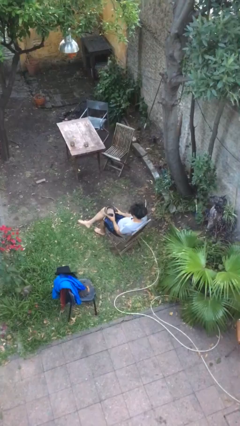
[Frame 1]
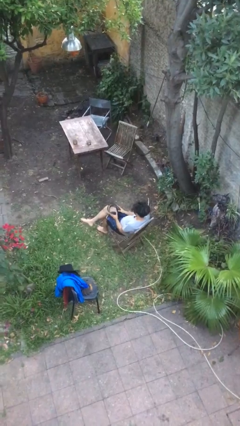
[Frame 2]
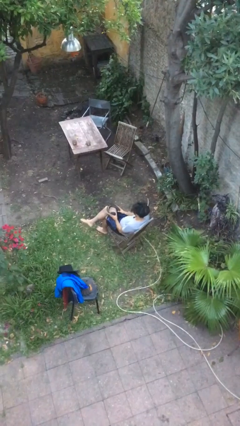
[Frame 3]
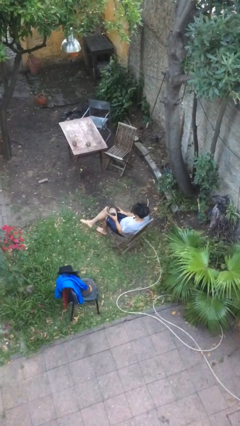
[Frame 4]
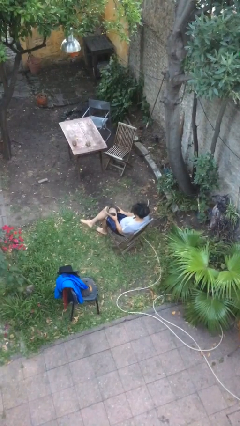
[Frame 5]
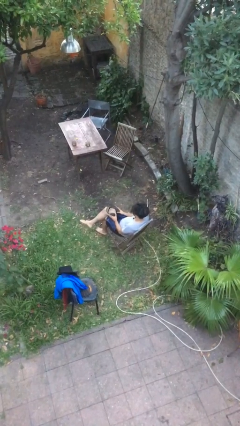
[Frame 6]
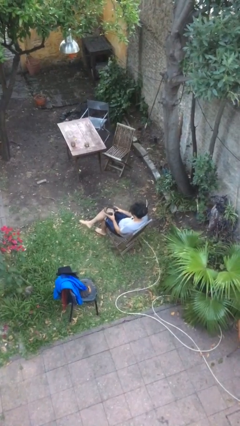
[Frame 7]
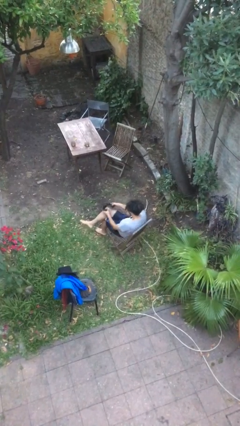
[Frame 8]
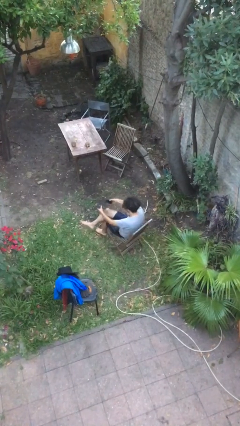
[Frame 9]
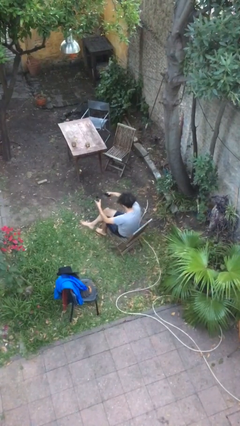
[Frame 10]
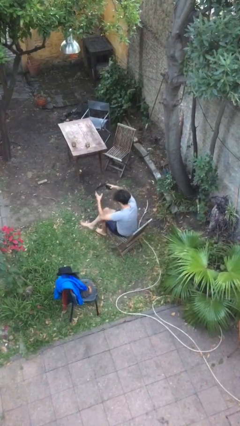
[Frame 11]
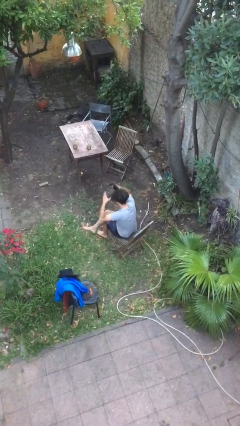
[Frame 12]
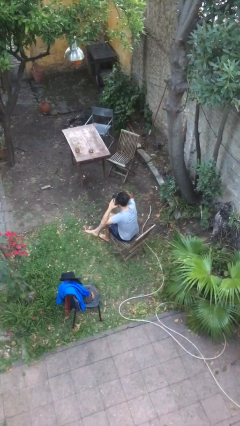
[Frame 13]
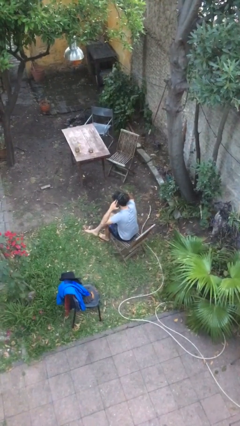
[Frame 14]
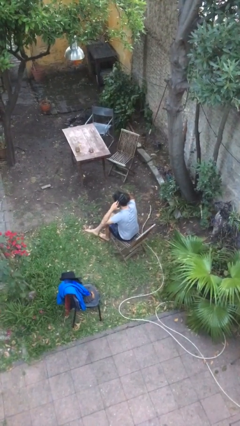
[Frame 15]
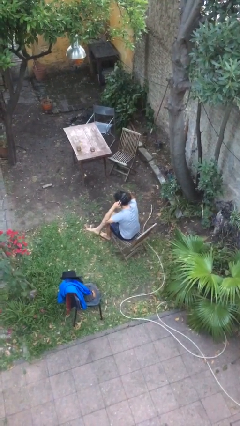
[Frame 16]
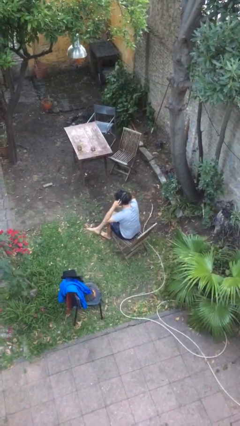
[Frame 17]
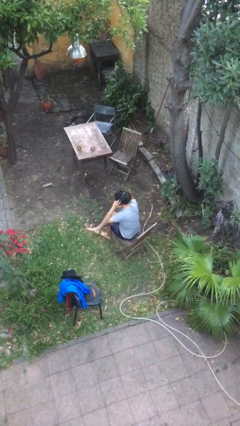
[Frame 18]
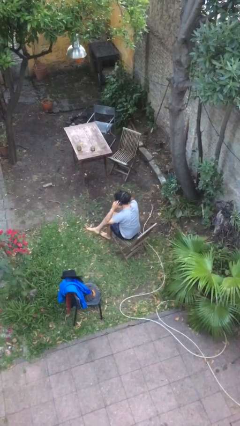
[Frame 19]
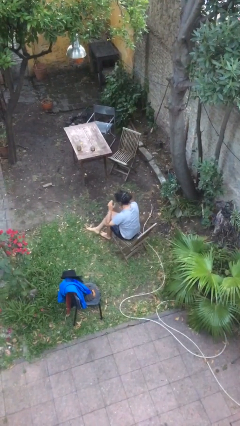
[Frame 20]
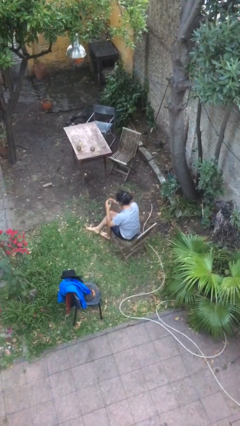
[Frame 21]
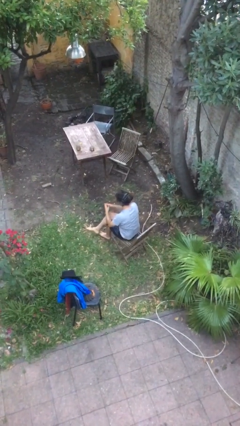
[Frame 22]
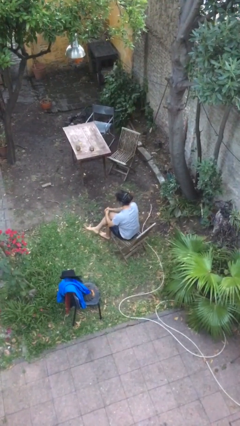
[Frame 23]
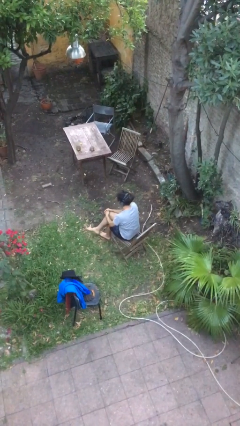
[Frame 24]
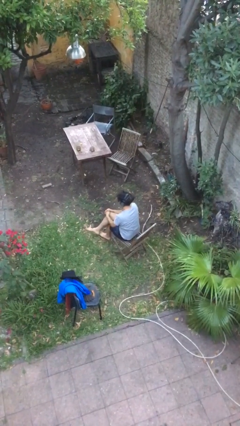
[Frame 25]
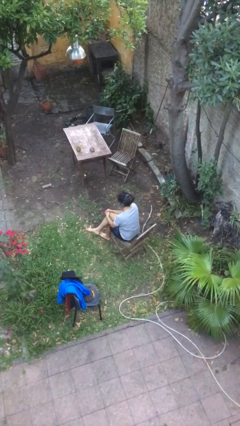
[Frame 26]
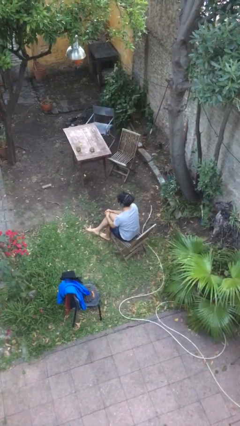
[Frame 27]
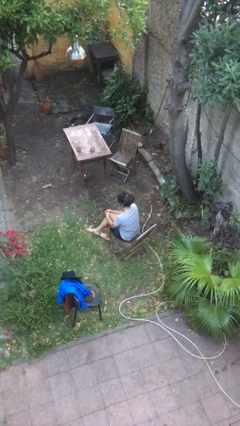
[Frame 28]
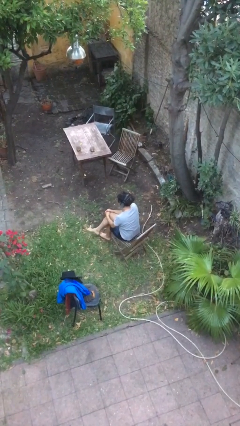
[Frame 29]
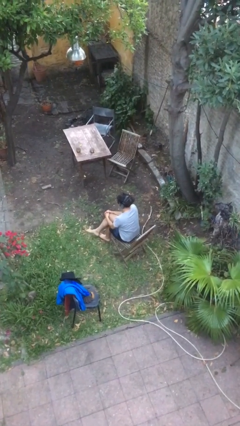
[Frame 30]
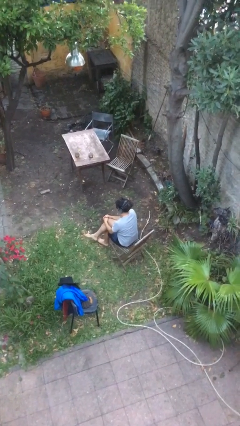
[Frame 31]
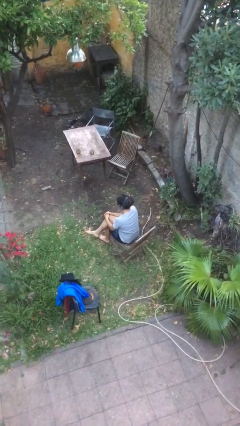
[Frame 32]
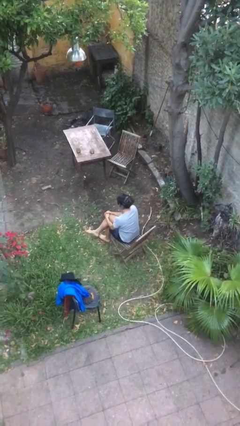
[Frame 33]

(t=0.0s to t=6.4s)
person puts on headphones

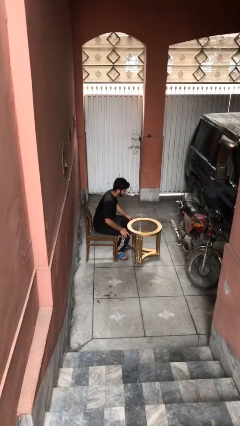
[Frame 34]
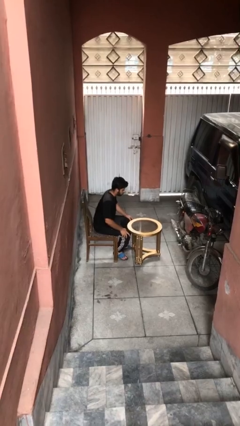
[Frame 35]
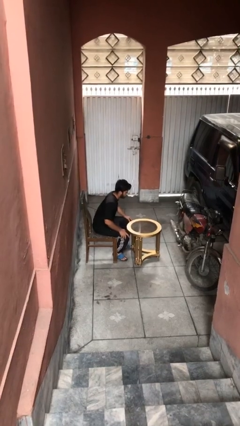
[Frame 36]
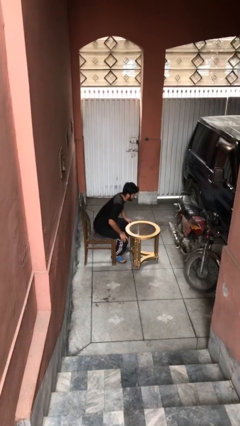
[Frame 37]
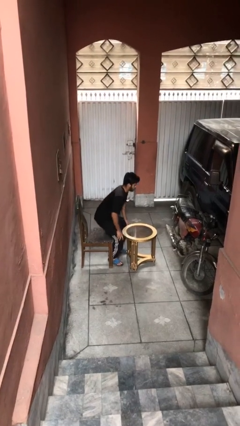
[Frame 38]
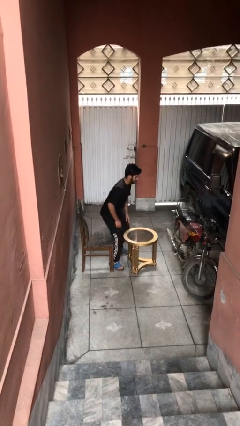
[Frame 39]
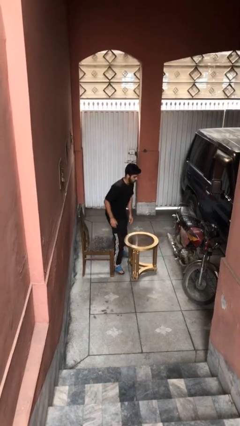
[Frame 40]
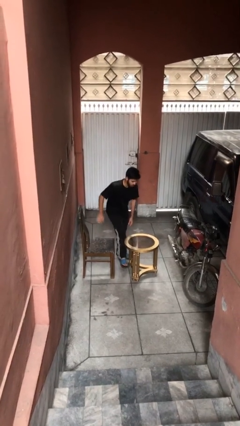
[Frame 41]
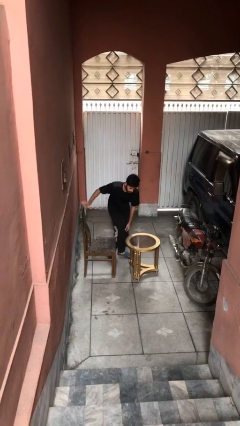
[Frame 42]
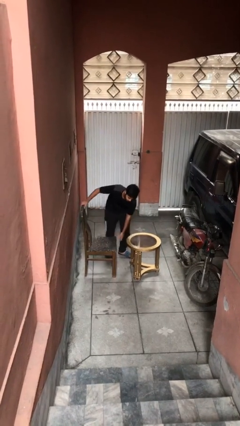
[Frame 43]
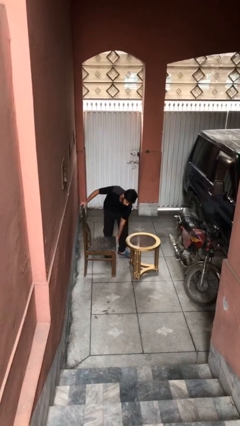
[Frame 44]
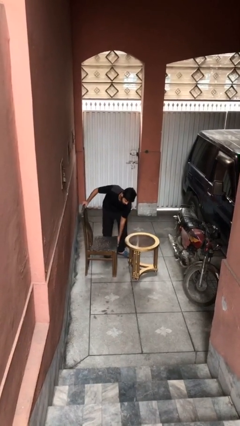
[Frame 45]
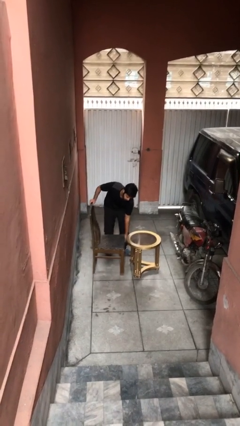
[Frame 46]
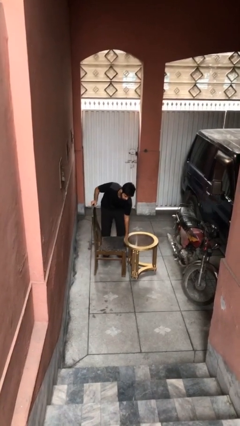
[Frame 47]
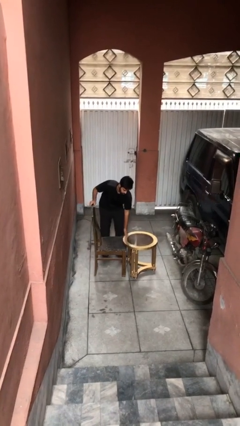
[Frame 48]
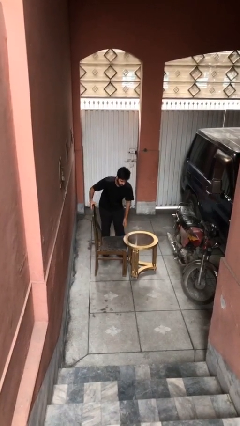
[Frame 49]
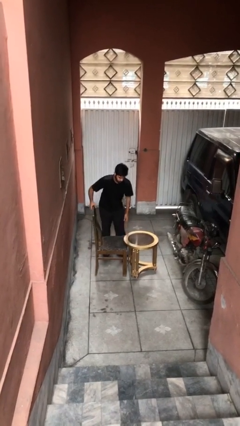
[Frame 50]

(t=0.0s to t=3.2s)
person stands up

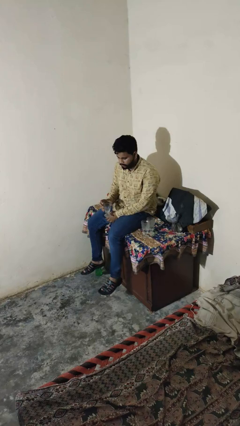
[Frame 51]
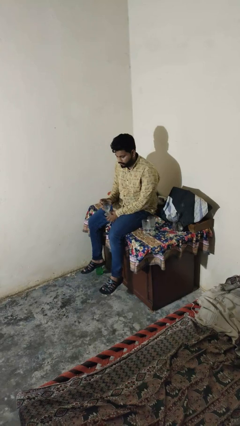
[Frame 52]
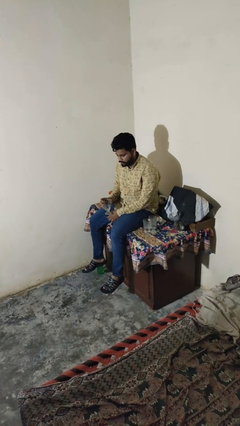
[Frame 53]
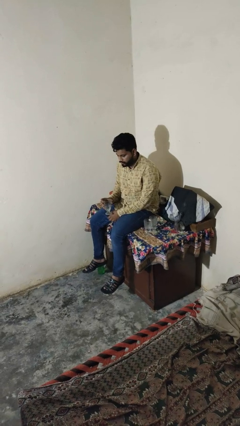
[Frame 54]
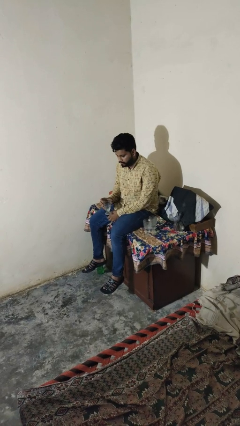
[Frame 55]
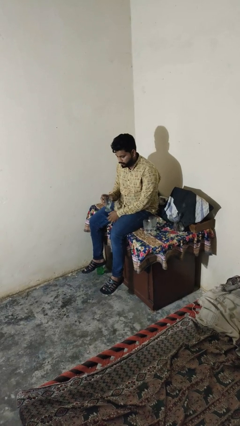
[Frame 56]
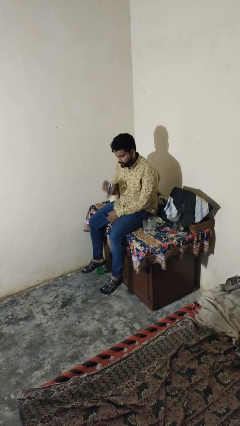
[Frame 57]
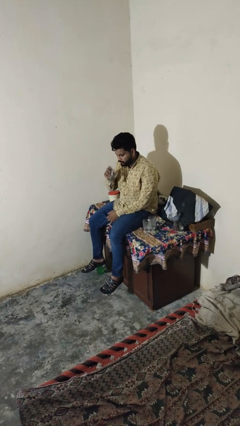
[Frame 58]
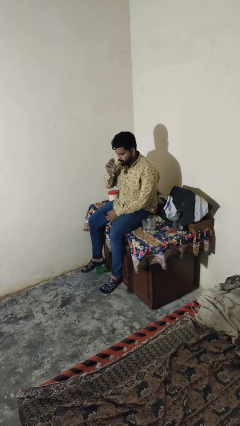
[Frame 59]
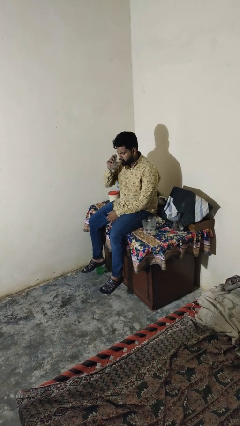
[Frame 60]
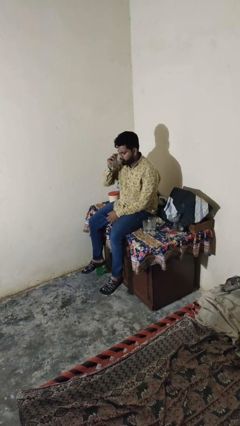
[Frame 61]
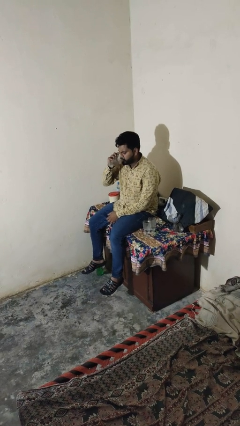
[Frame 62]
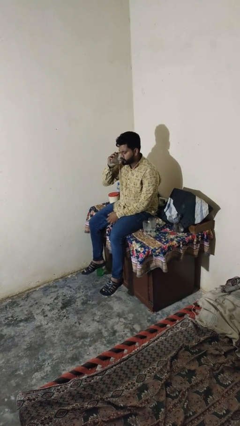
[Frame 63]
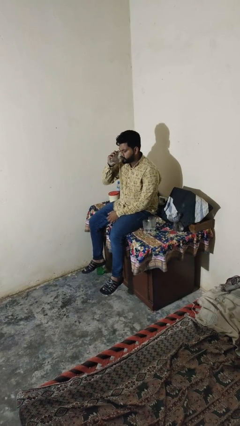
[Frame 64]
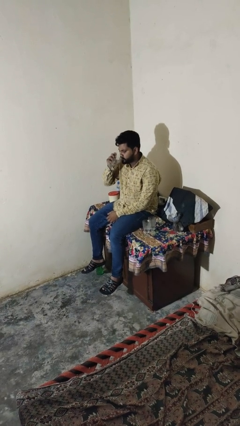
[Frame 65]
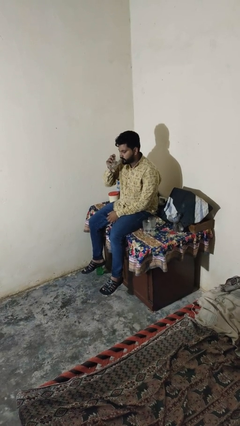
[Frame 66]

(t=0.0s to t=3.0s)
person drinks from shotglass

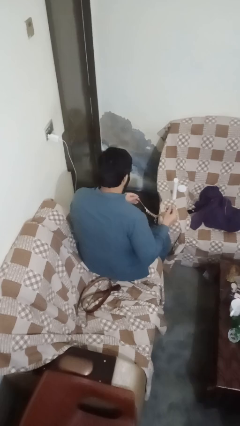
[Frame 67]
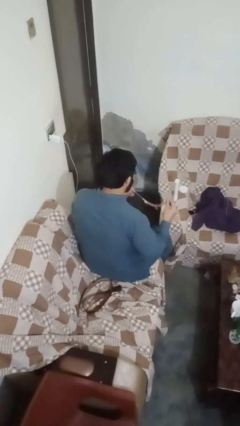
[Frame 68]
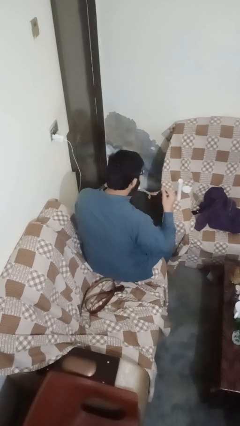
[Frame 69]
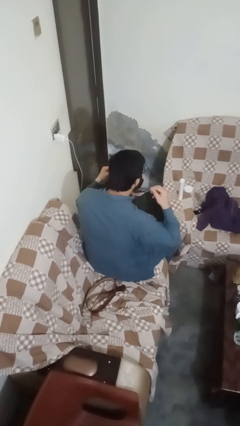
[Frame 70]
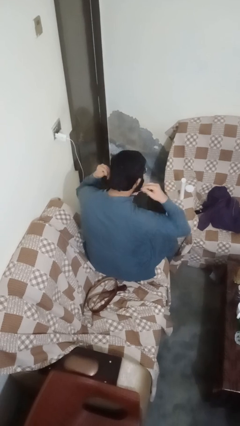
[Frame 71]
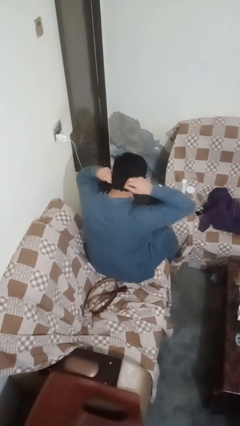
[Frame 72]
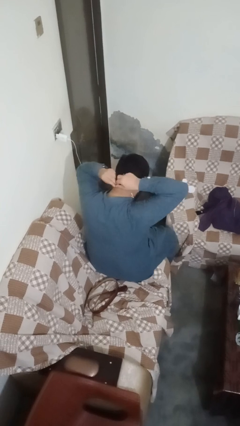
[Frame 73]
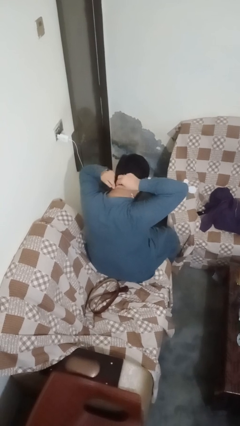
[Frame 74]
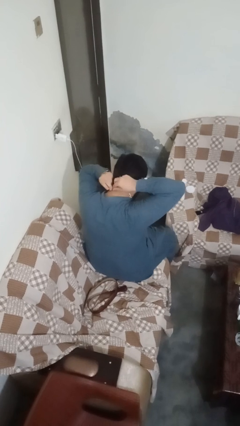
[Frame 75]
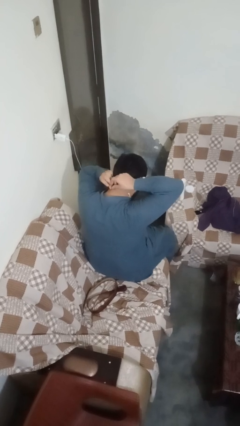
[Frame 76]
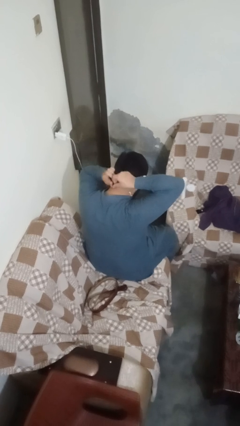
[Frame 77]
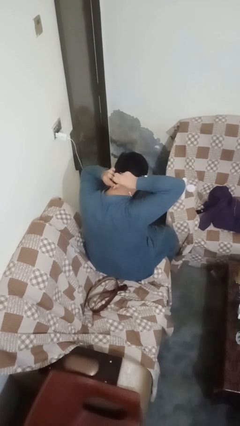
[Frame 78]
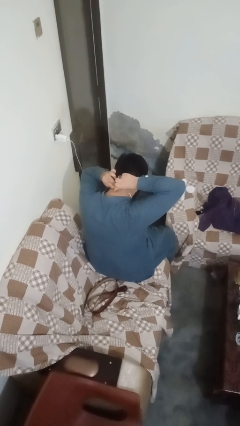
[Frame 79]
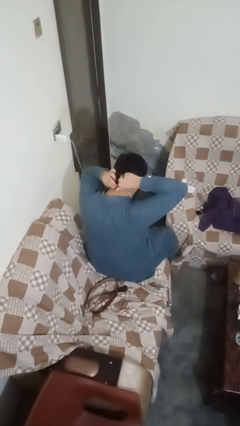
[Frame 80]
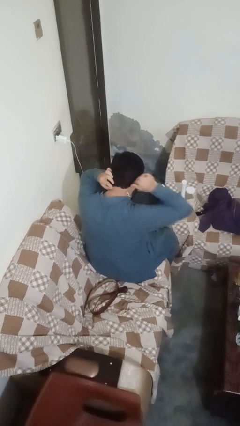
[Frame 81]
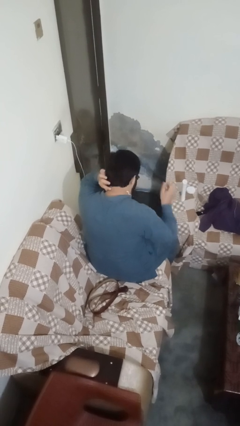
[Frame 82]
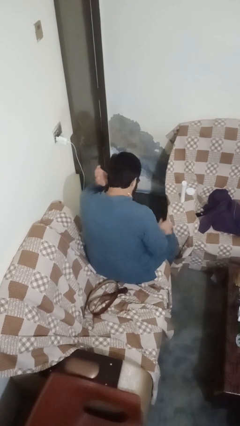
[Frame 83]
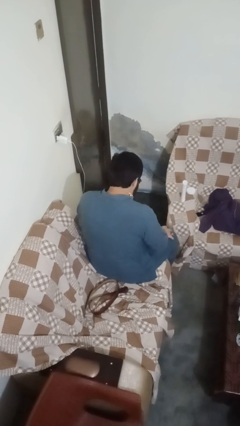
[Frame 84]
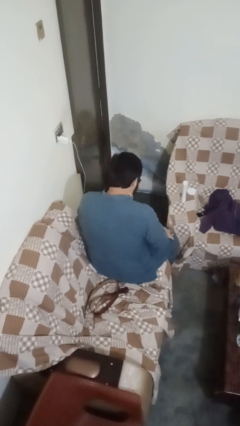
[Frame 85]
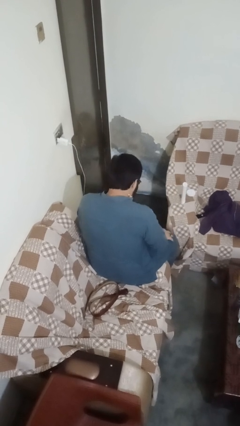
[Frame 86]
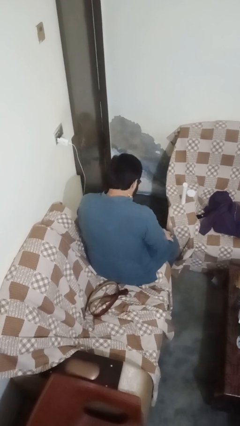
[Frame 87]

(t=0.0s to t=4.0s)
person puts on necklace

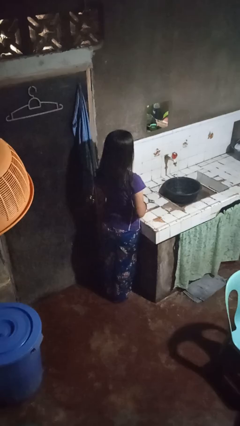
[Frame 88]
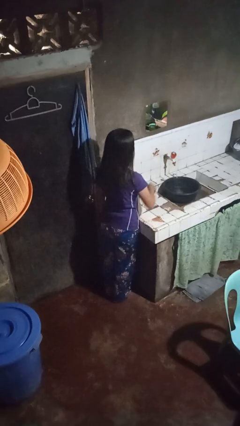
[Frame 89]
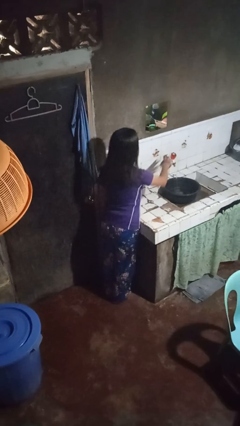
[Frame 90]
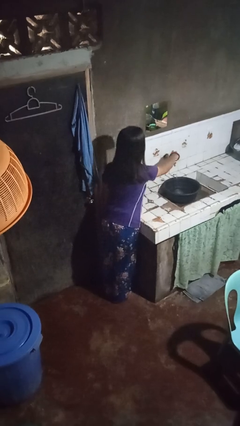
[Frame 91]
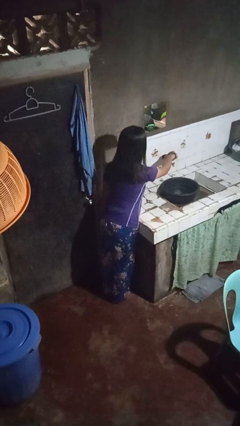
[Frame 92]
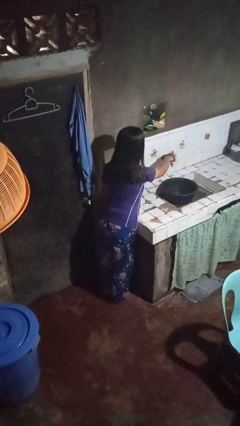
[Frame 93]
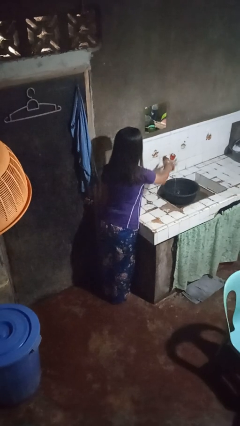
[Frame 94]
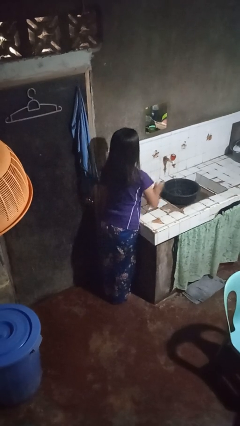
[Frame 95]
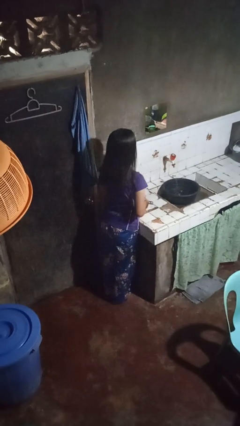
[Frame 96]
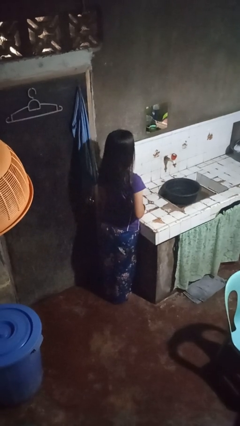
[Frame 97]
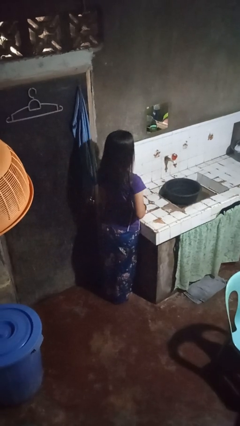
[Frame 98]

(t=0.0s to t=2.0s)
person turns off faucet
